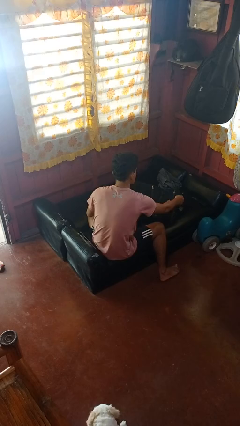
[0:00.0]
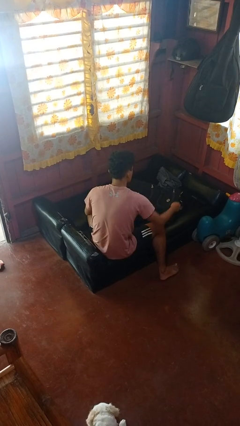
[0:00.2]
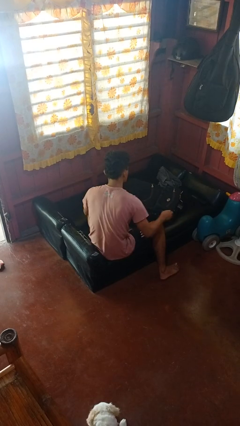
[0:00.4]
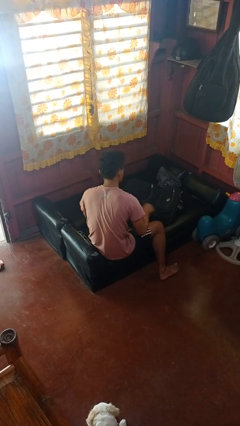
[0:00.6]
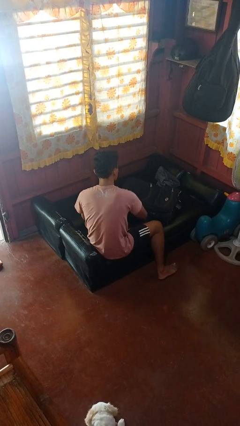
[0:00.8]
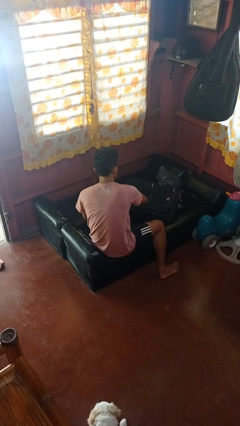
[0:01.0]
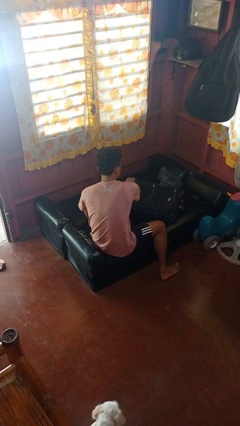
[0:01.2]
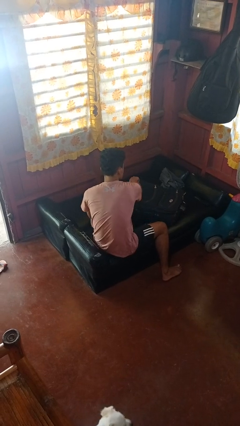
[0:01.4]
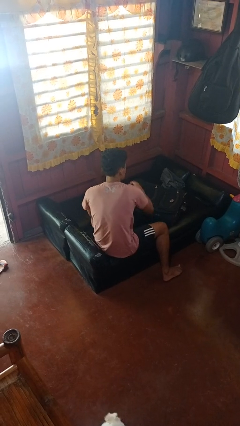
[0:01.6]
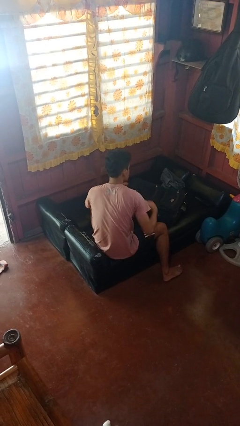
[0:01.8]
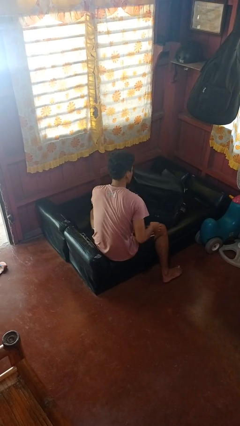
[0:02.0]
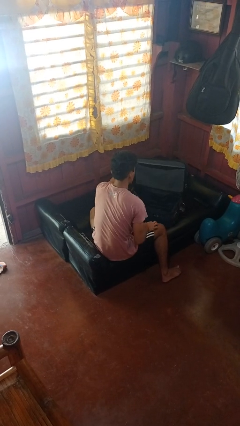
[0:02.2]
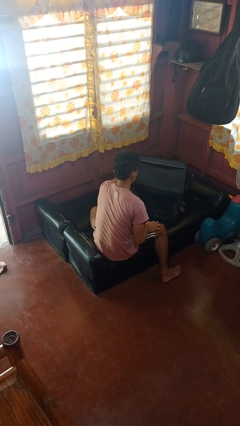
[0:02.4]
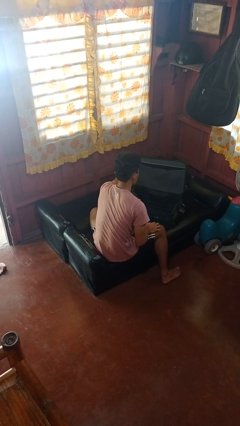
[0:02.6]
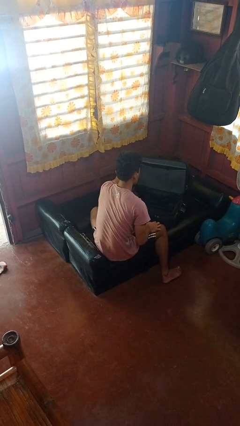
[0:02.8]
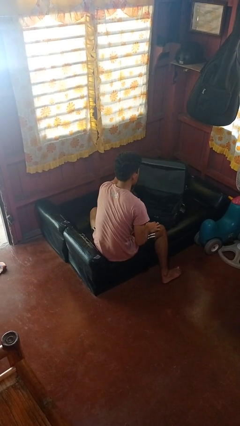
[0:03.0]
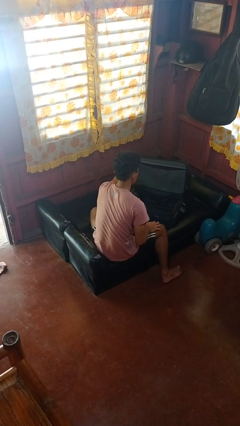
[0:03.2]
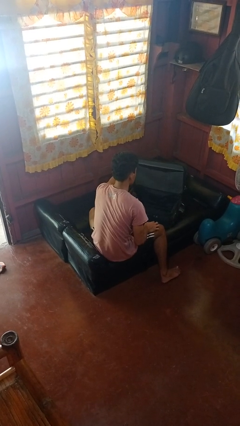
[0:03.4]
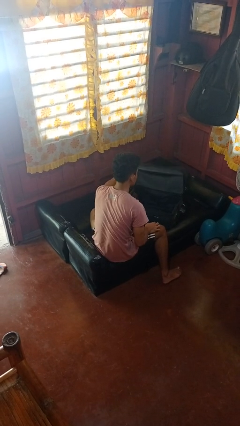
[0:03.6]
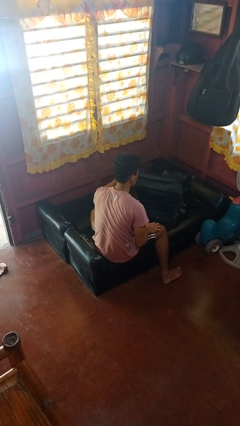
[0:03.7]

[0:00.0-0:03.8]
person opens suitcase

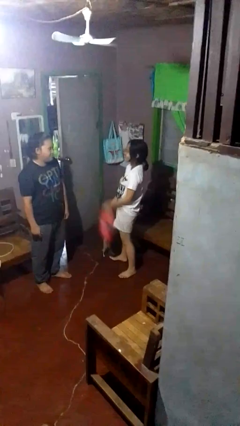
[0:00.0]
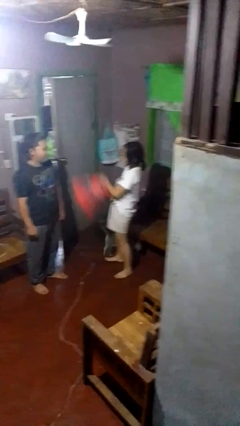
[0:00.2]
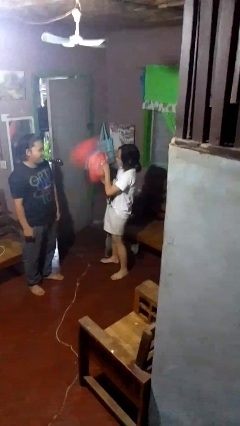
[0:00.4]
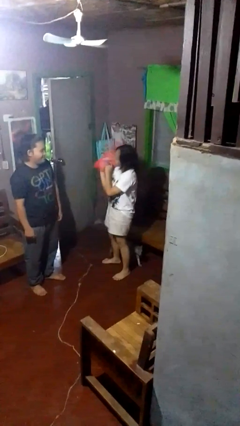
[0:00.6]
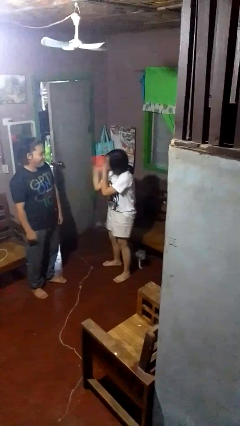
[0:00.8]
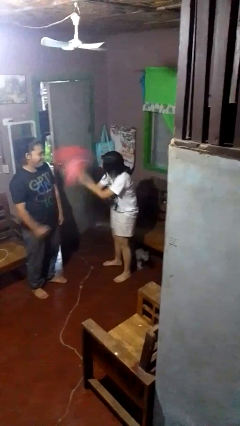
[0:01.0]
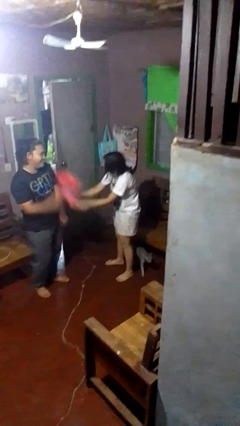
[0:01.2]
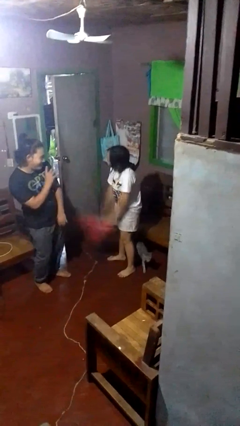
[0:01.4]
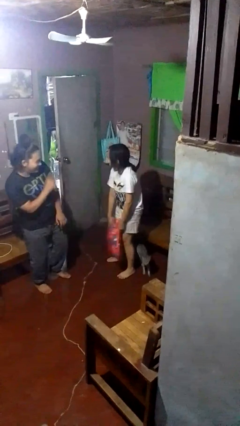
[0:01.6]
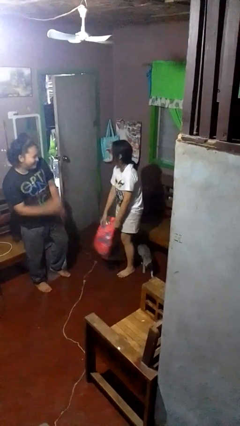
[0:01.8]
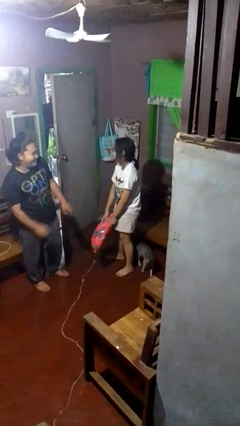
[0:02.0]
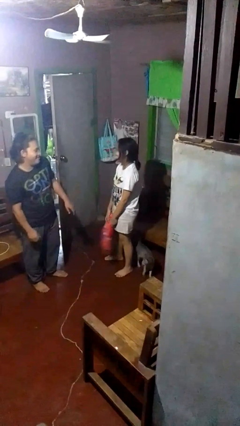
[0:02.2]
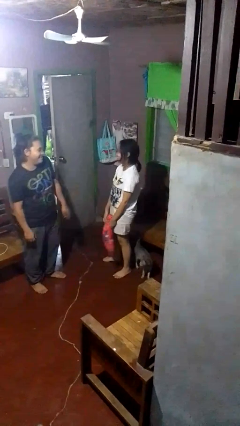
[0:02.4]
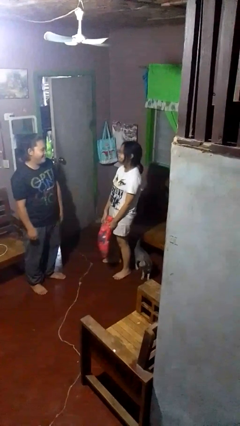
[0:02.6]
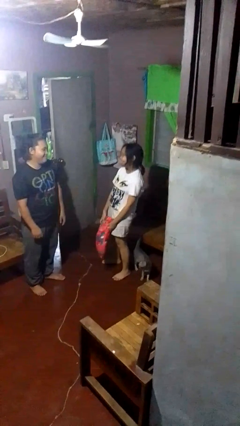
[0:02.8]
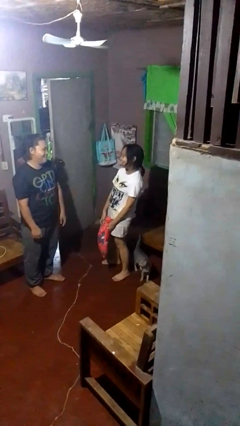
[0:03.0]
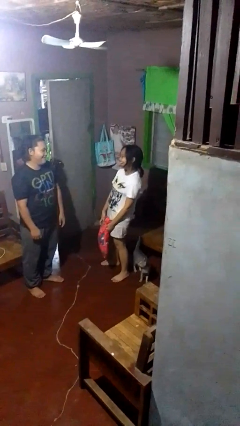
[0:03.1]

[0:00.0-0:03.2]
person hits person with pillow

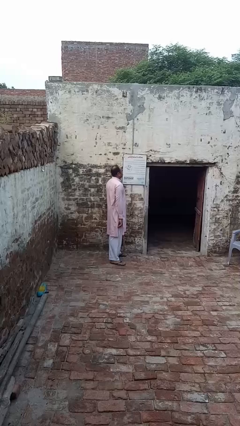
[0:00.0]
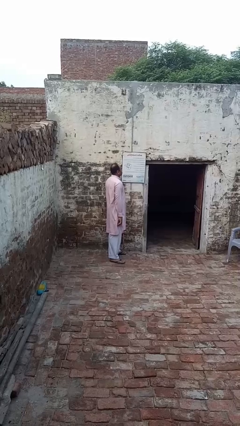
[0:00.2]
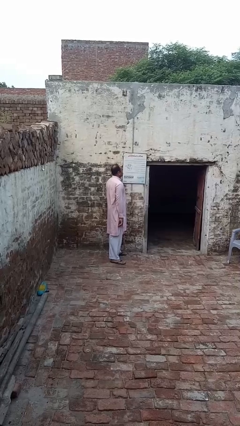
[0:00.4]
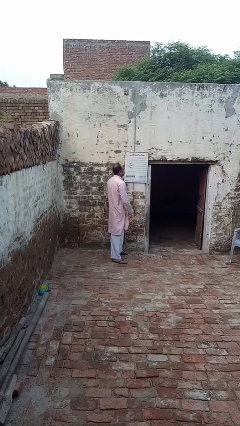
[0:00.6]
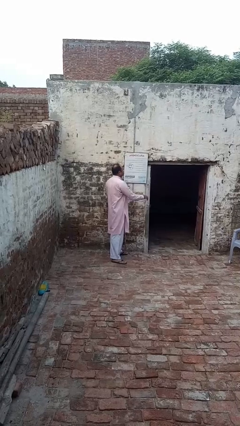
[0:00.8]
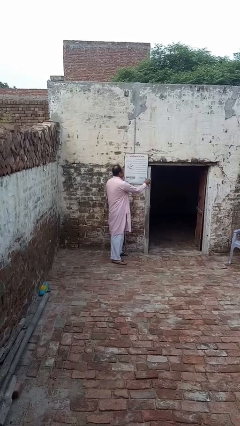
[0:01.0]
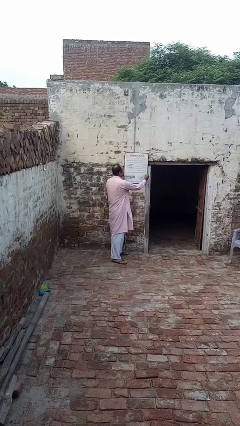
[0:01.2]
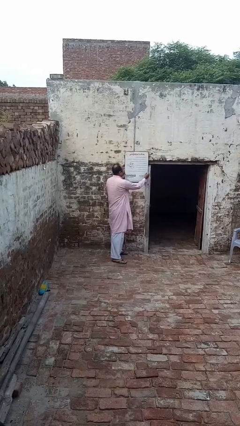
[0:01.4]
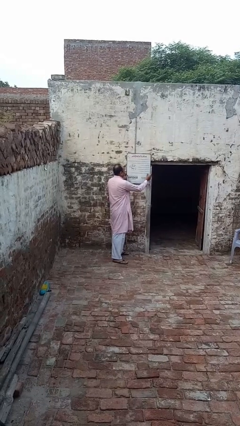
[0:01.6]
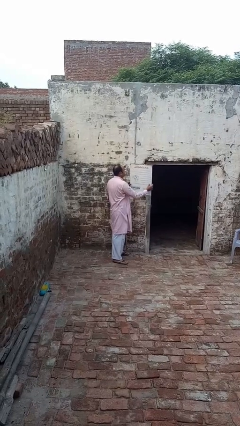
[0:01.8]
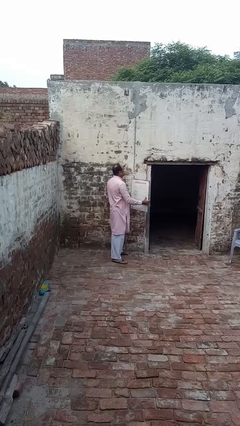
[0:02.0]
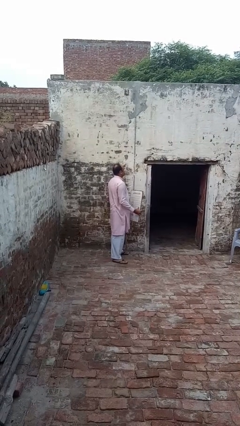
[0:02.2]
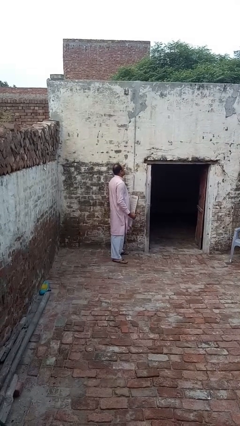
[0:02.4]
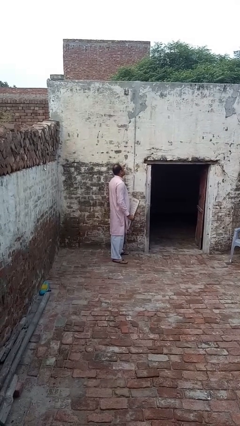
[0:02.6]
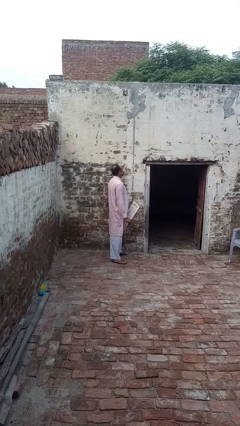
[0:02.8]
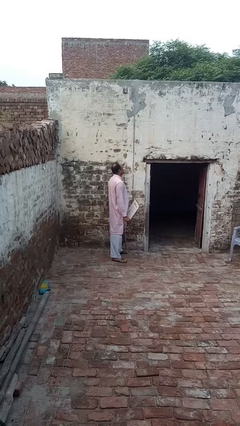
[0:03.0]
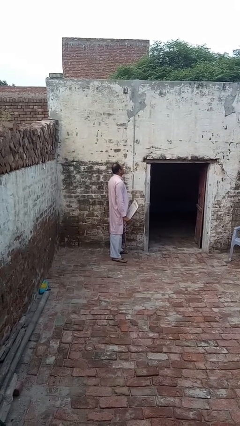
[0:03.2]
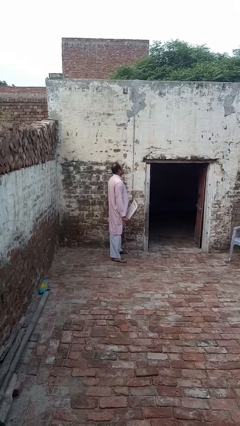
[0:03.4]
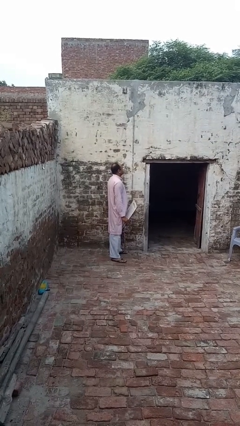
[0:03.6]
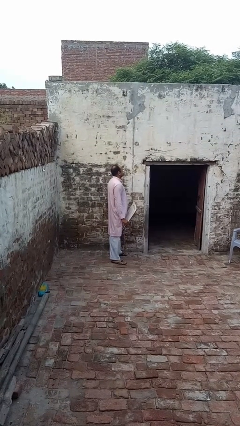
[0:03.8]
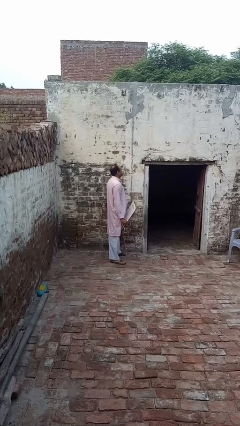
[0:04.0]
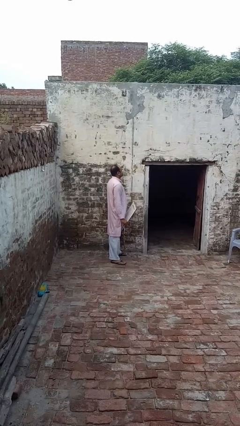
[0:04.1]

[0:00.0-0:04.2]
person takes down picture frame

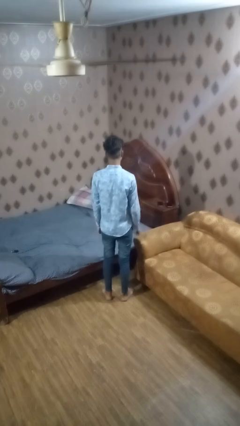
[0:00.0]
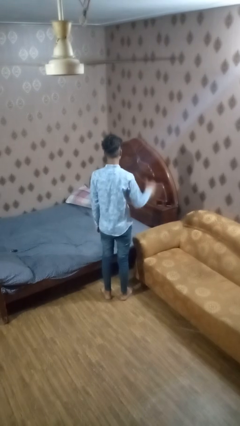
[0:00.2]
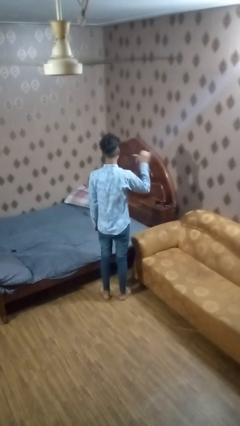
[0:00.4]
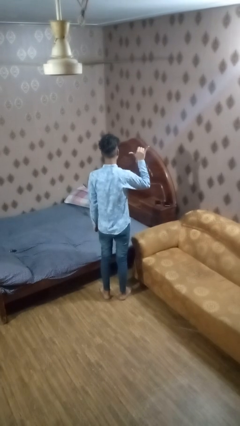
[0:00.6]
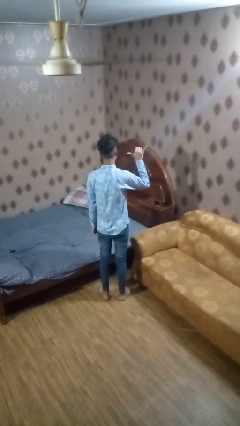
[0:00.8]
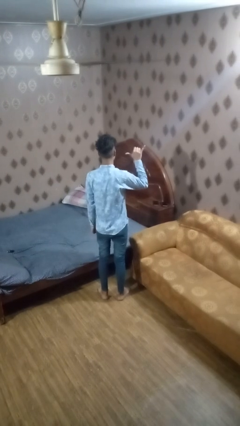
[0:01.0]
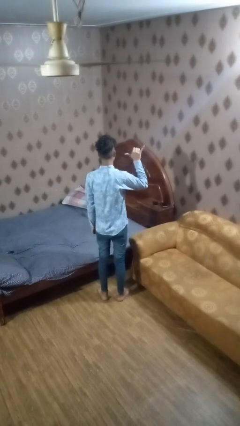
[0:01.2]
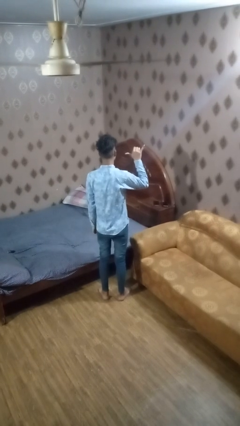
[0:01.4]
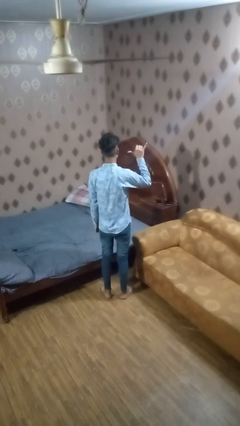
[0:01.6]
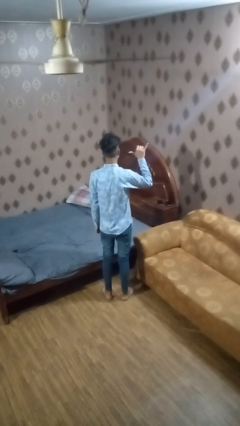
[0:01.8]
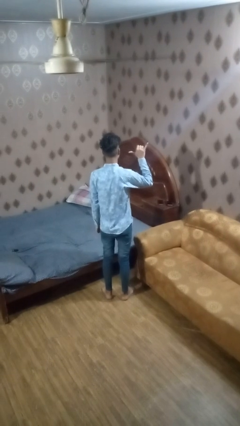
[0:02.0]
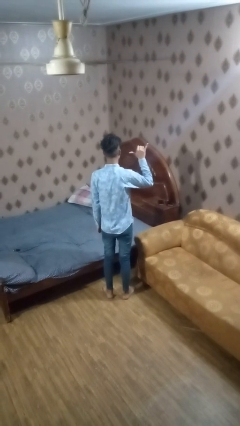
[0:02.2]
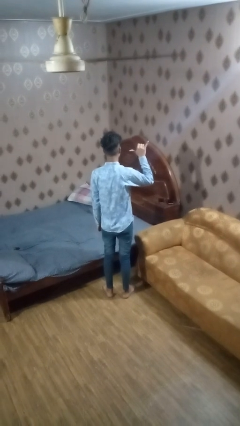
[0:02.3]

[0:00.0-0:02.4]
person gestures hang loose

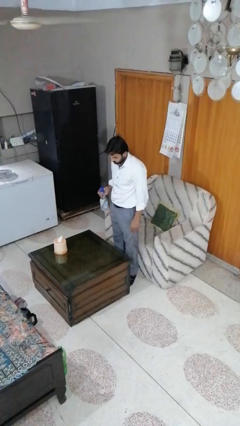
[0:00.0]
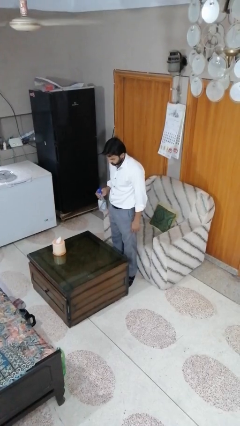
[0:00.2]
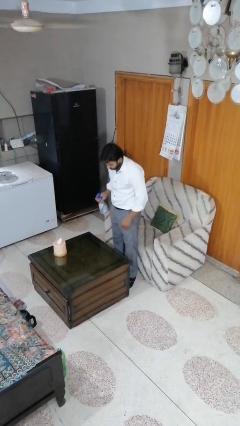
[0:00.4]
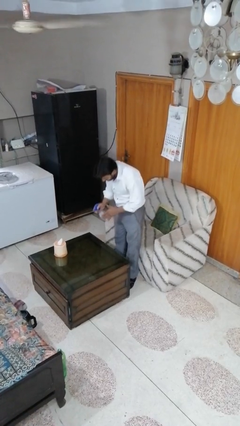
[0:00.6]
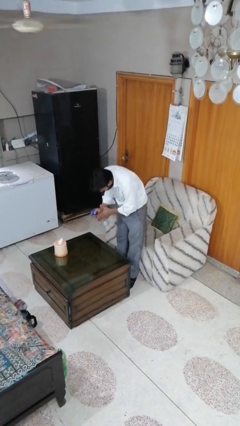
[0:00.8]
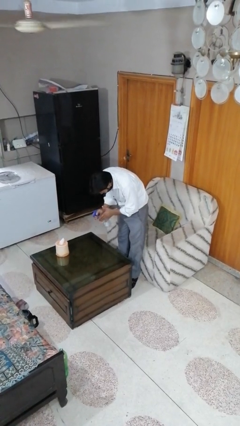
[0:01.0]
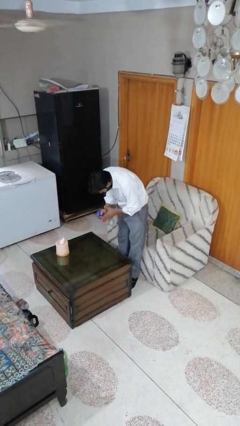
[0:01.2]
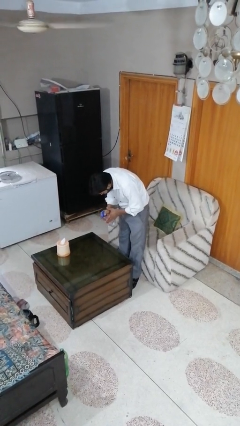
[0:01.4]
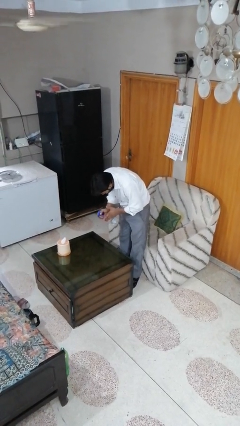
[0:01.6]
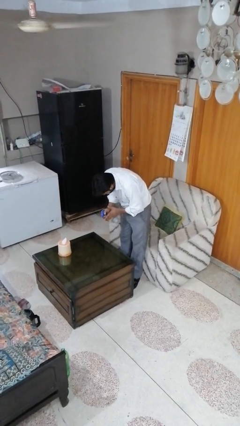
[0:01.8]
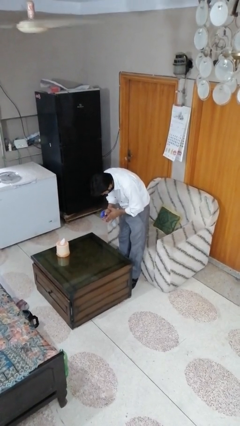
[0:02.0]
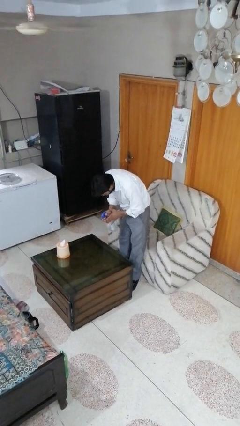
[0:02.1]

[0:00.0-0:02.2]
person sprays from bottle

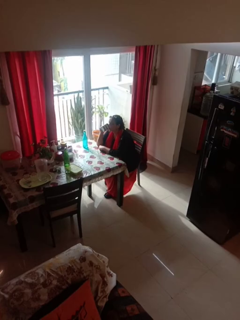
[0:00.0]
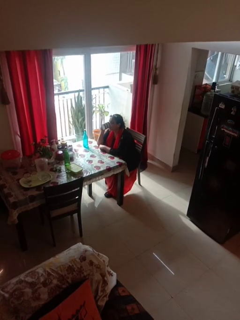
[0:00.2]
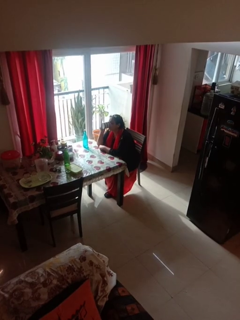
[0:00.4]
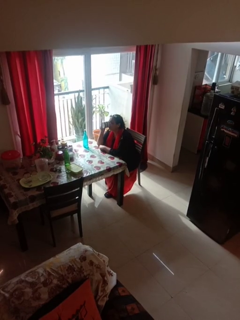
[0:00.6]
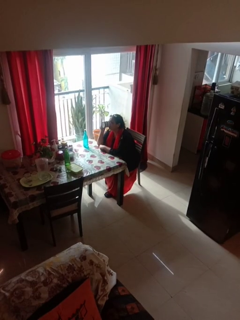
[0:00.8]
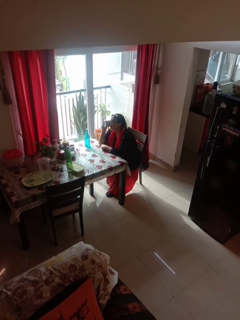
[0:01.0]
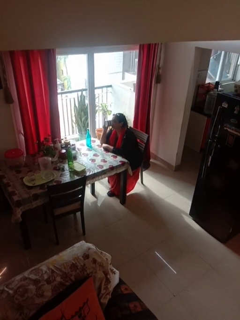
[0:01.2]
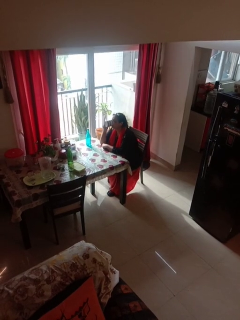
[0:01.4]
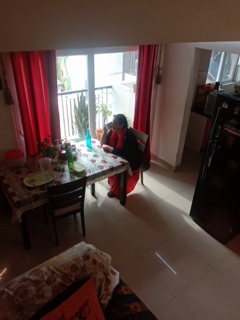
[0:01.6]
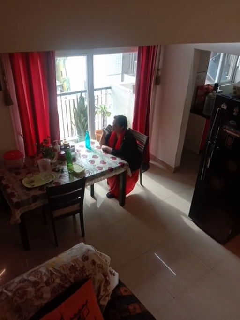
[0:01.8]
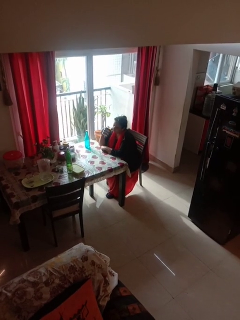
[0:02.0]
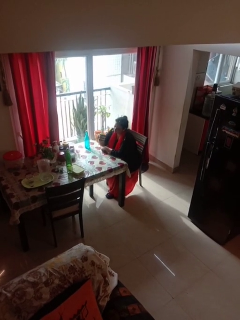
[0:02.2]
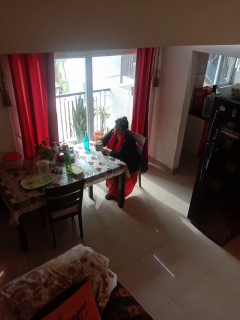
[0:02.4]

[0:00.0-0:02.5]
person drinks from mug
